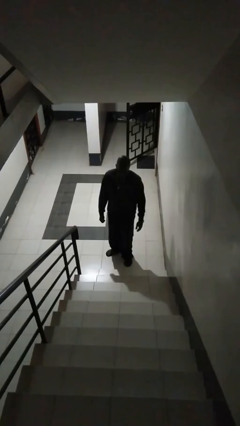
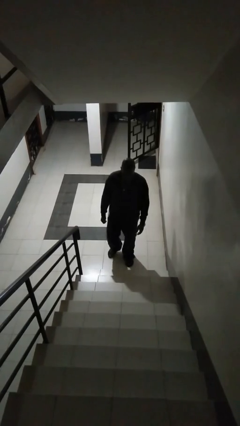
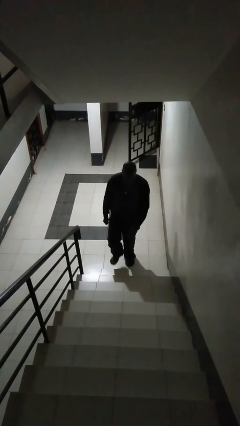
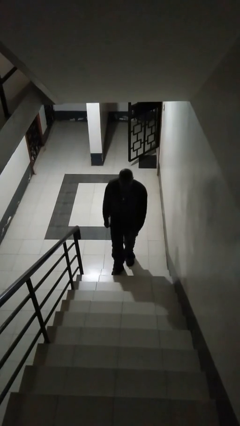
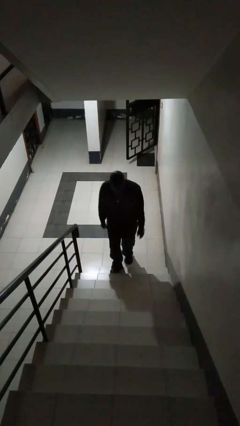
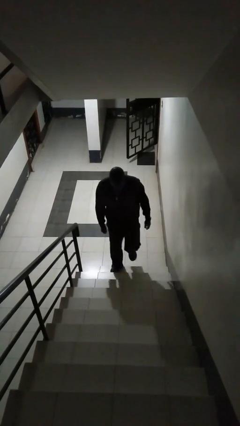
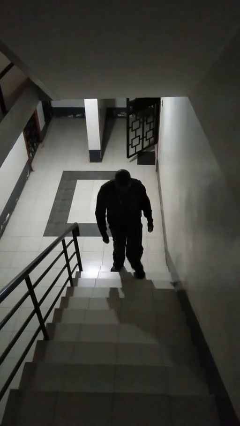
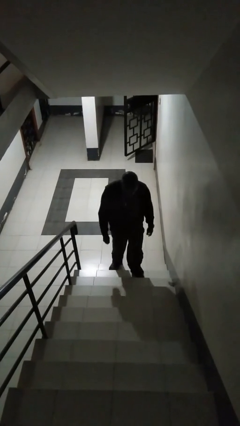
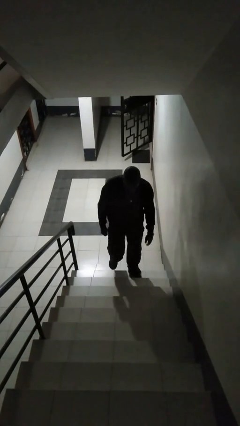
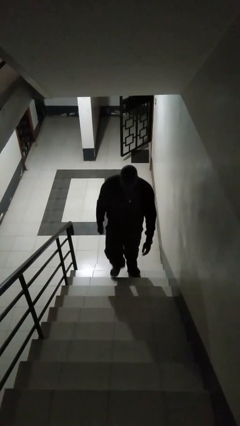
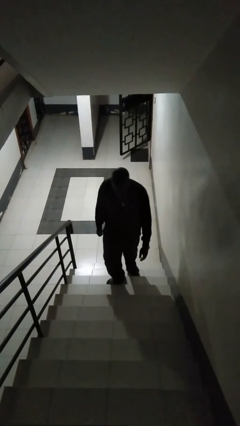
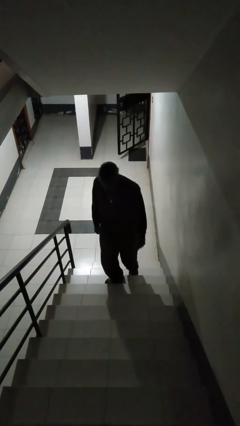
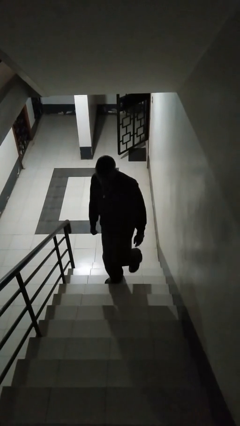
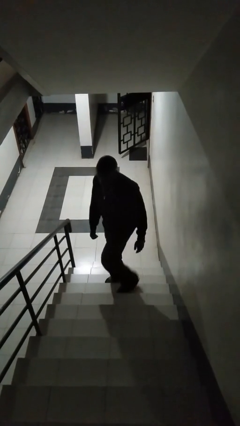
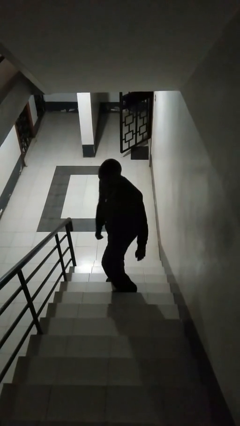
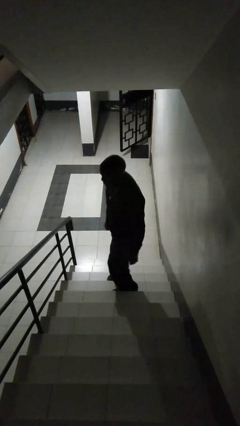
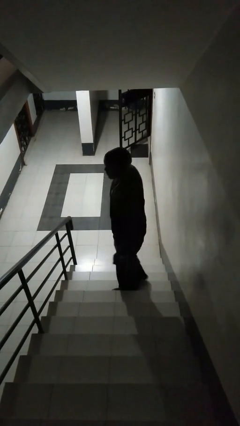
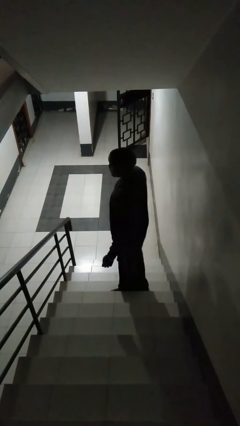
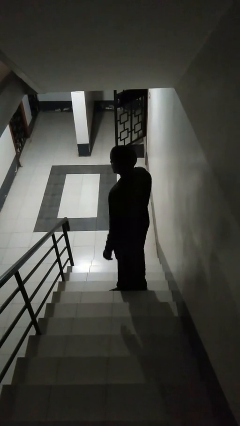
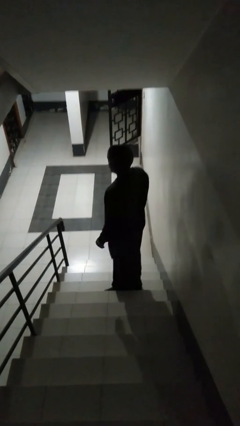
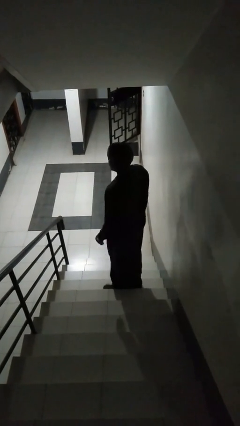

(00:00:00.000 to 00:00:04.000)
person climbs up stairs

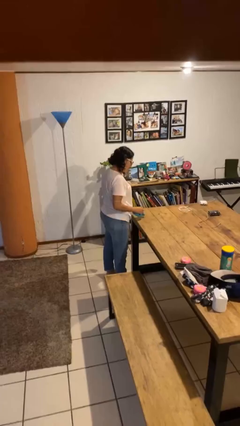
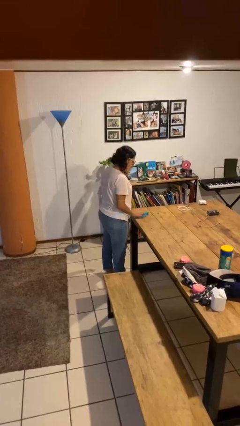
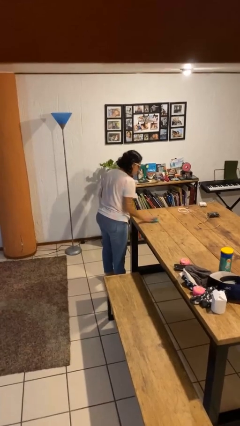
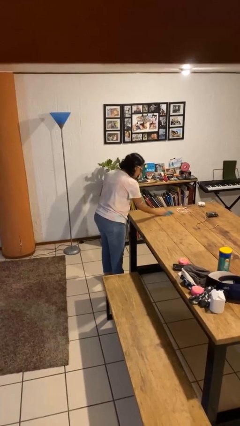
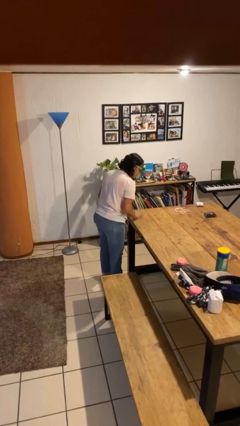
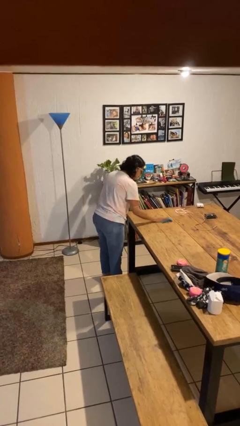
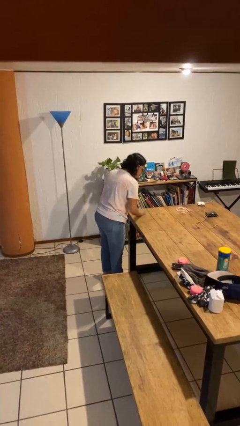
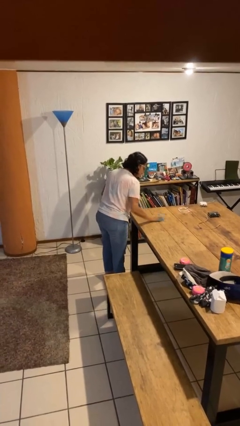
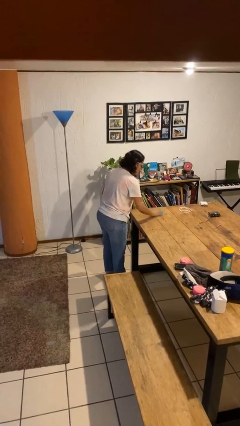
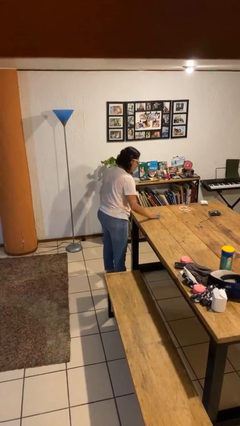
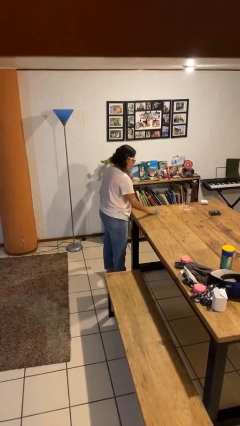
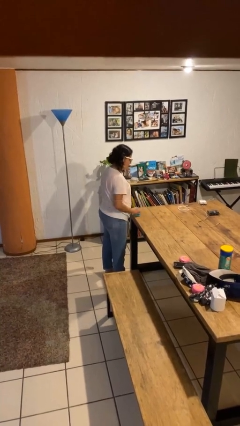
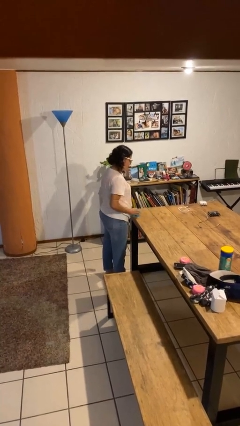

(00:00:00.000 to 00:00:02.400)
person cleans table with rag

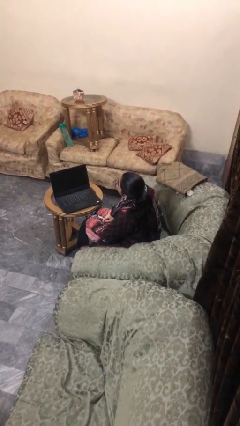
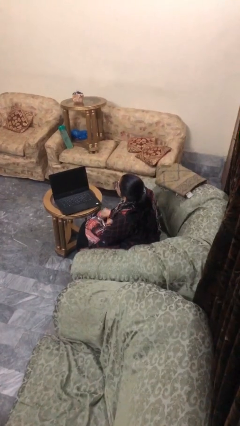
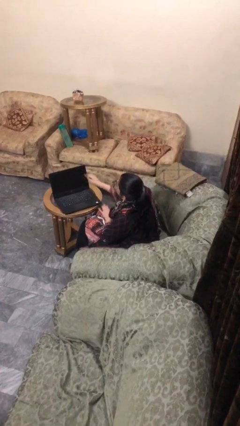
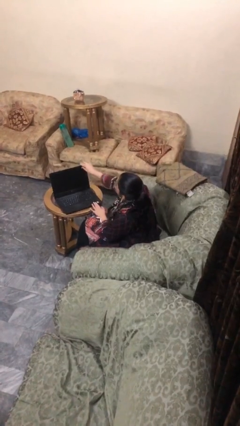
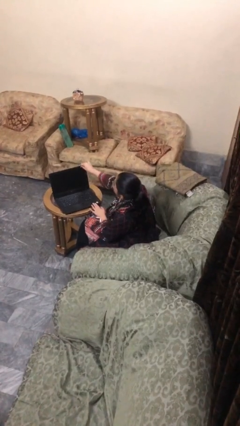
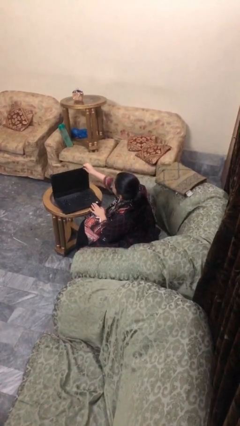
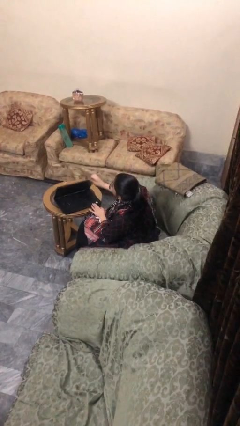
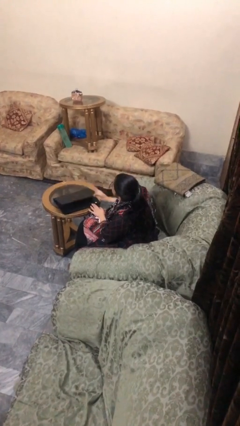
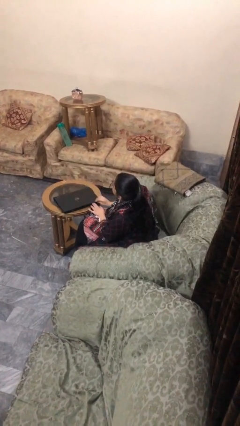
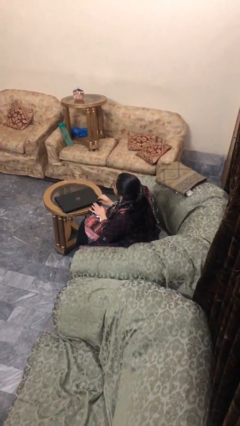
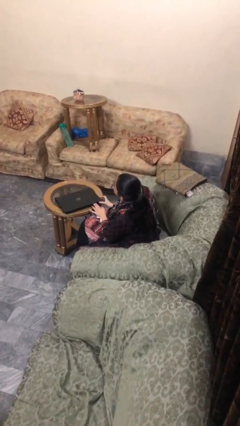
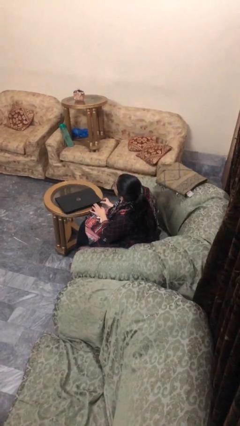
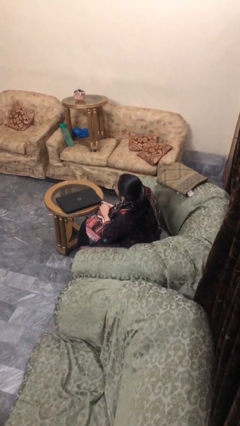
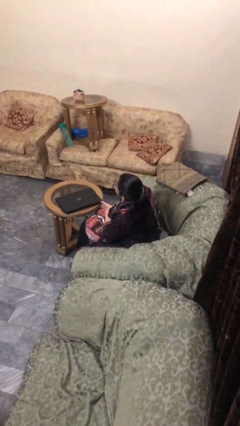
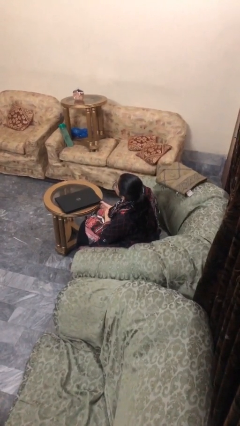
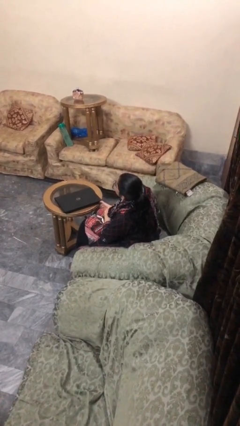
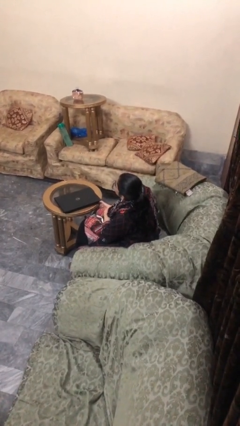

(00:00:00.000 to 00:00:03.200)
person closes laptop

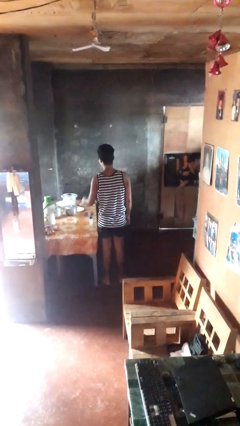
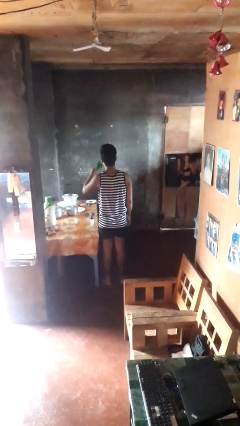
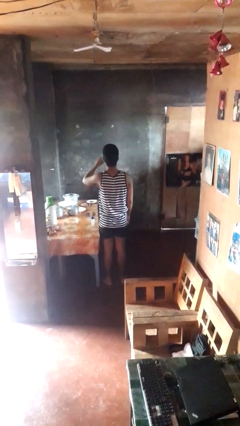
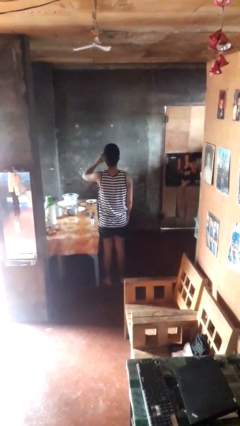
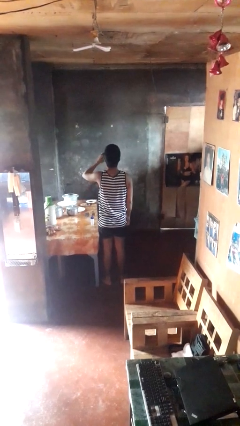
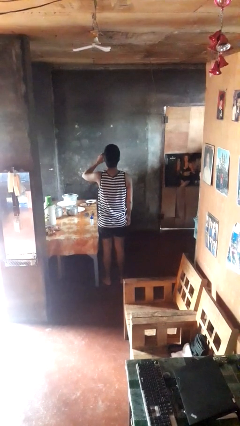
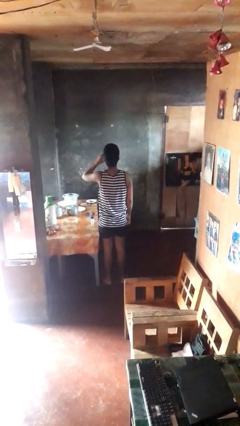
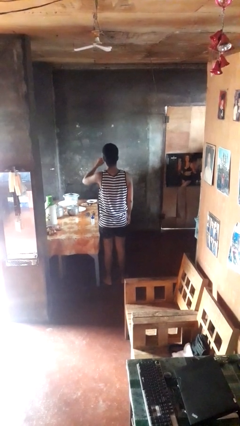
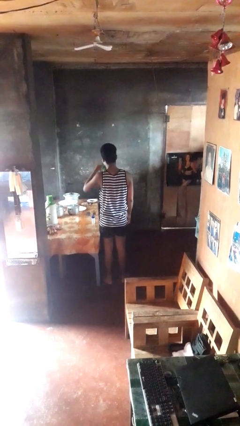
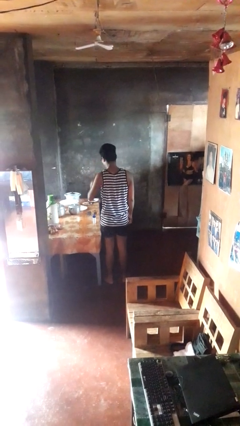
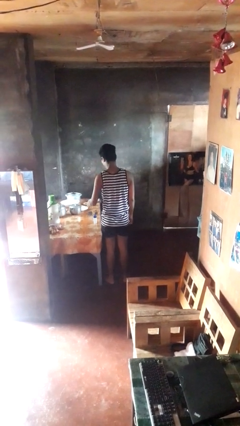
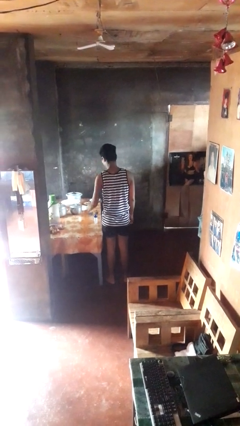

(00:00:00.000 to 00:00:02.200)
person drinks from cup

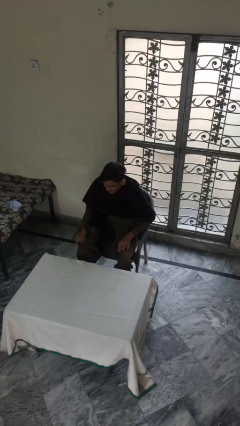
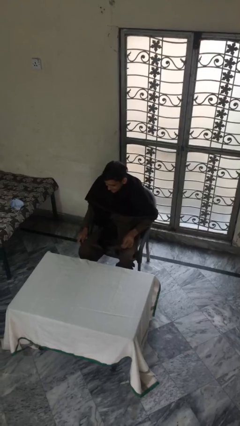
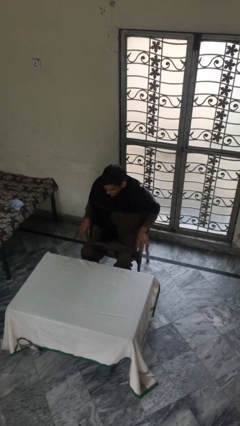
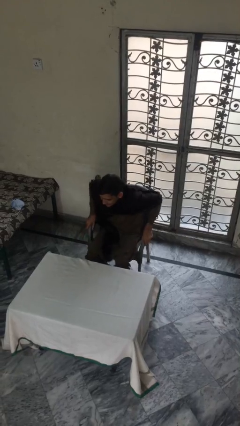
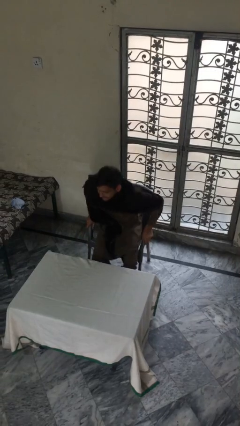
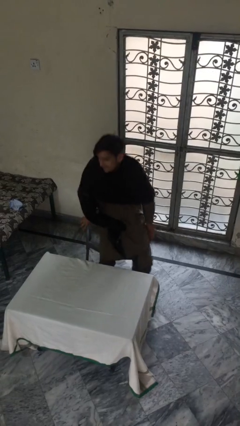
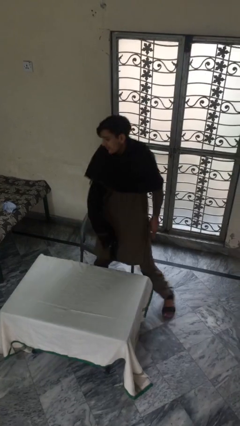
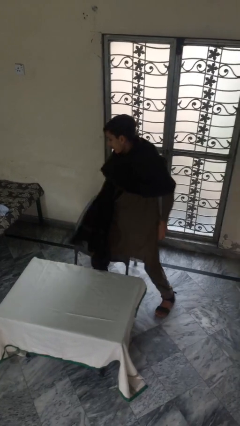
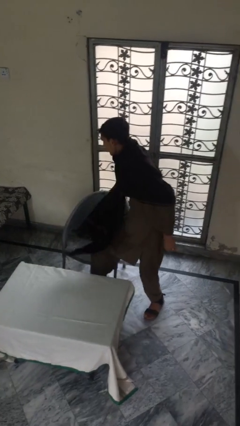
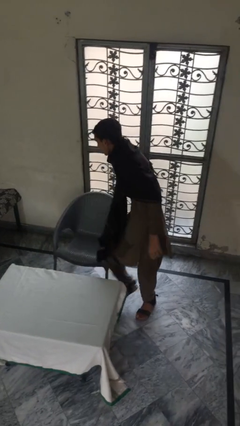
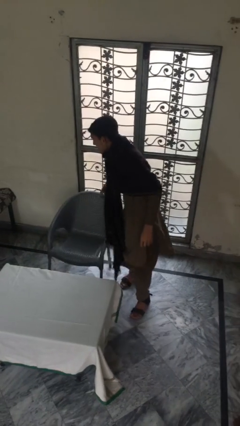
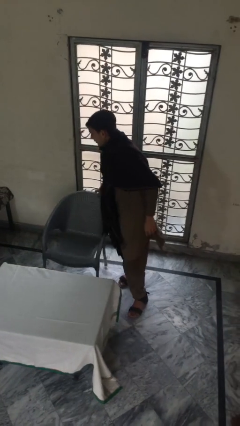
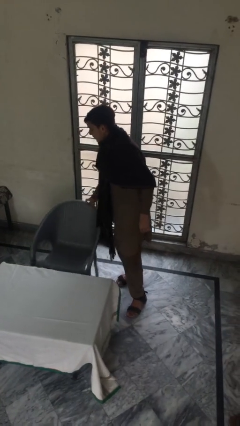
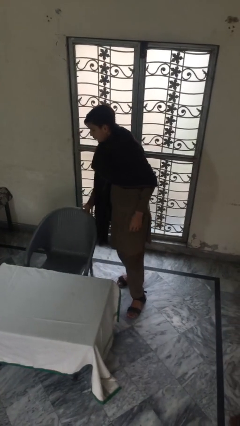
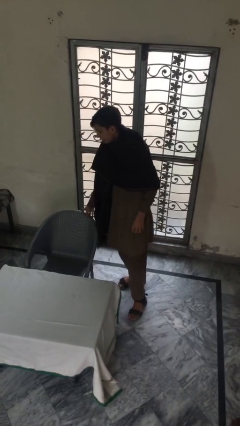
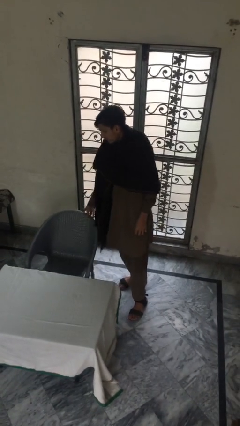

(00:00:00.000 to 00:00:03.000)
person stands up

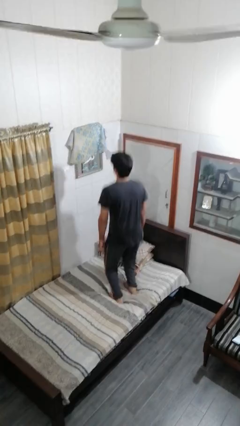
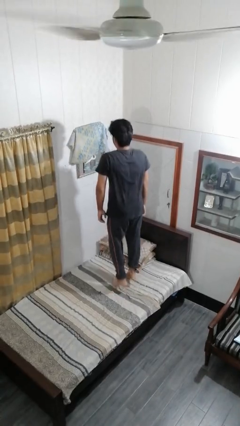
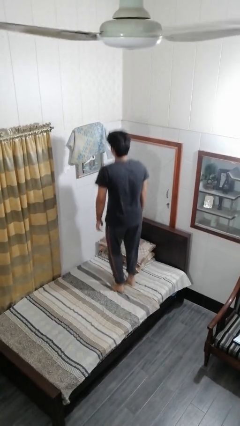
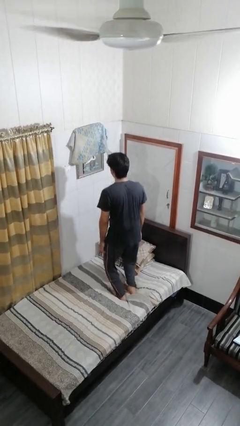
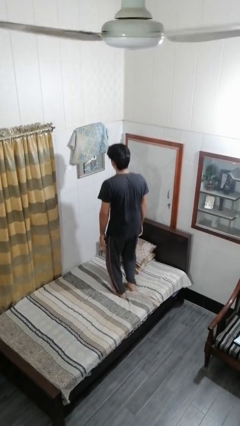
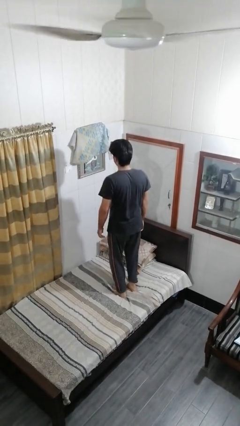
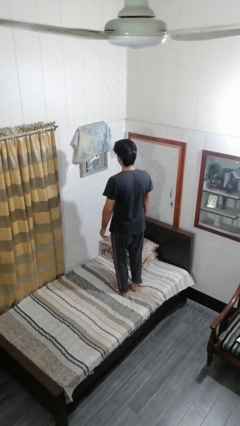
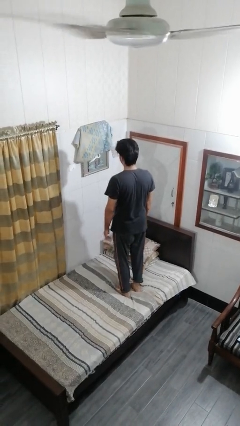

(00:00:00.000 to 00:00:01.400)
person jumps on bed

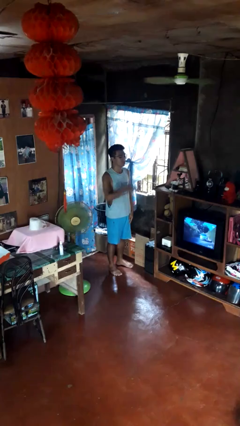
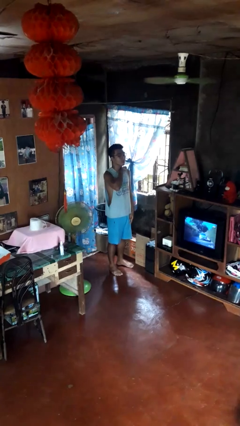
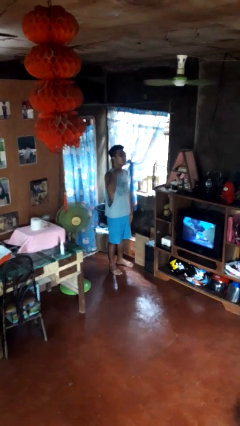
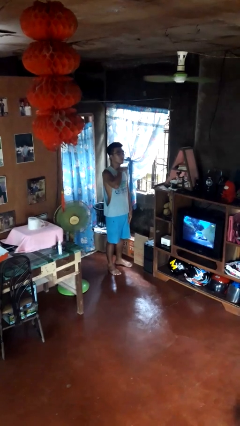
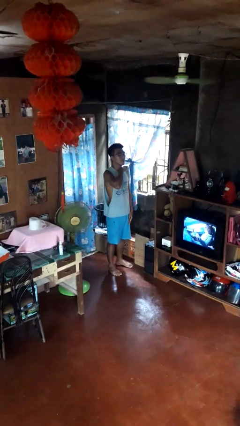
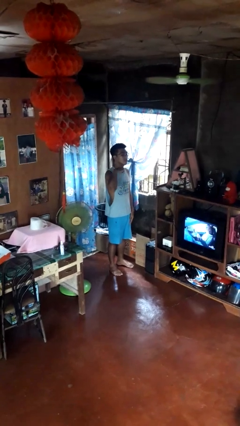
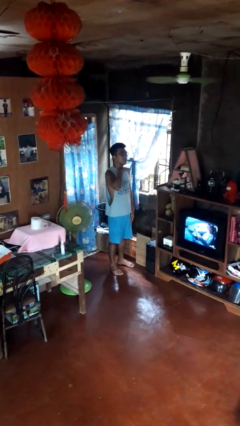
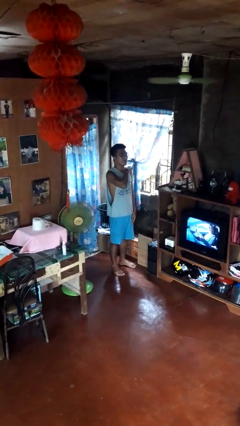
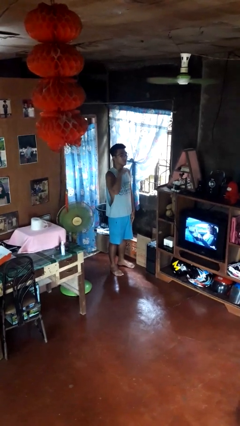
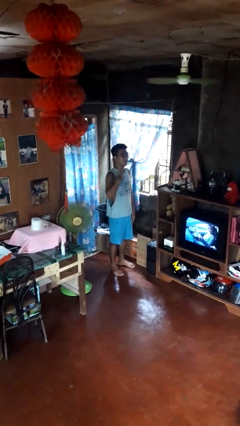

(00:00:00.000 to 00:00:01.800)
person gestures cut
